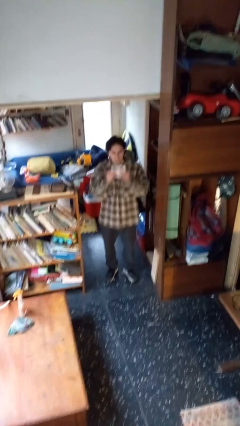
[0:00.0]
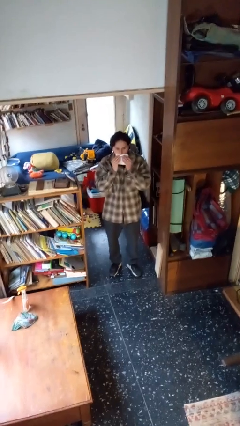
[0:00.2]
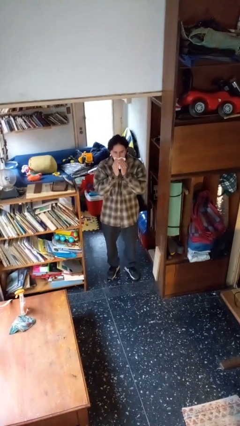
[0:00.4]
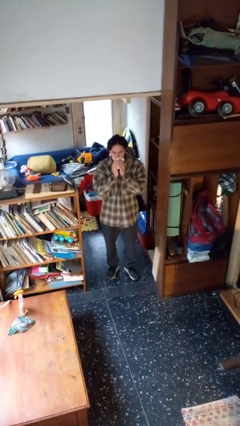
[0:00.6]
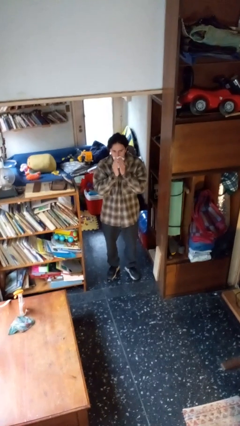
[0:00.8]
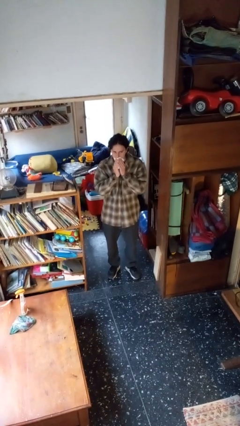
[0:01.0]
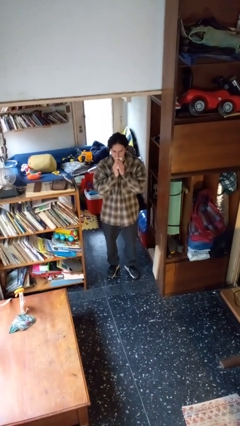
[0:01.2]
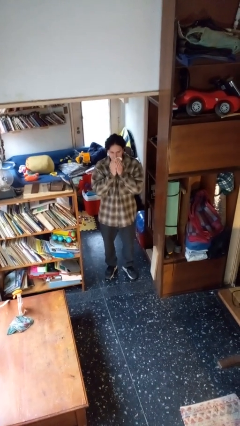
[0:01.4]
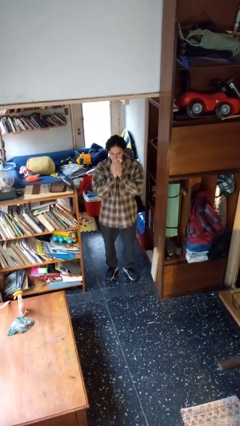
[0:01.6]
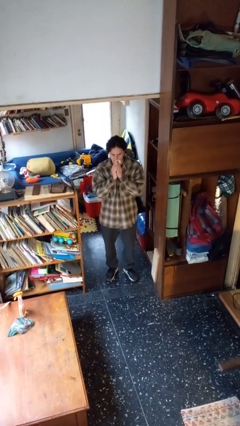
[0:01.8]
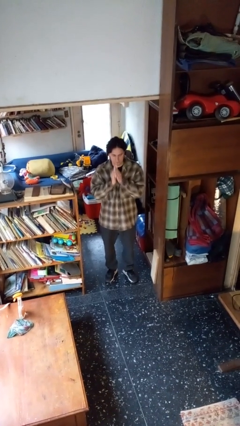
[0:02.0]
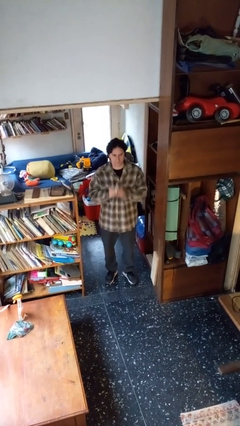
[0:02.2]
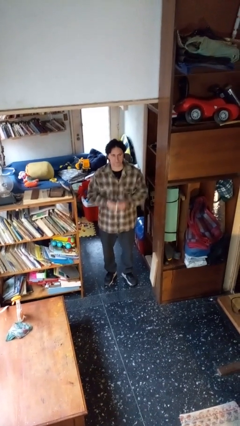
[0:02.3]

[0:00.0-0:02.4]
person wipes mouth with napkin

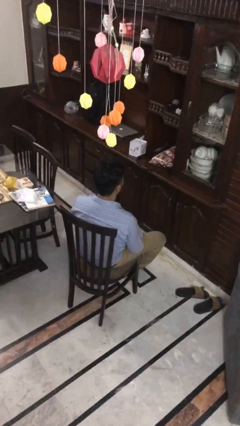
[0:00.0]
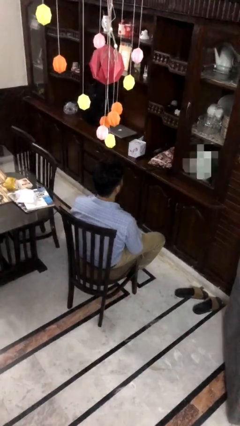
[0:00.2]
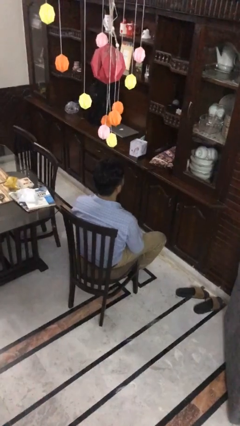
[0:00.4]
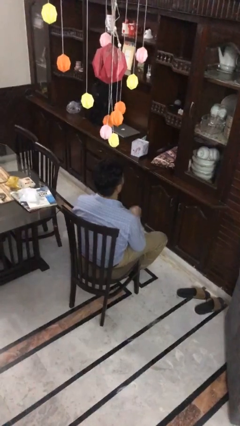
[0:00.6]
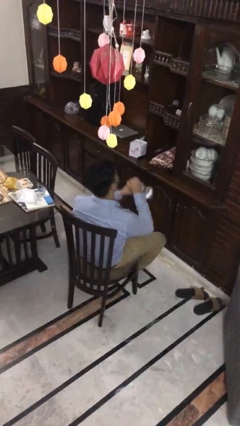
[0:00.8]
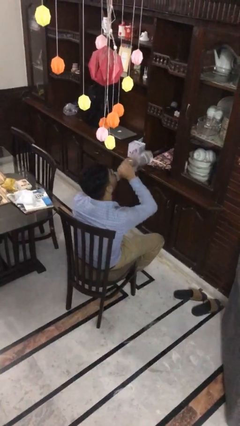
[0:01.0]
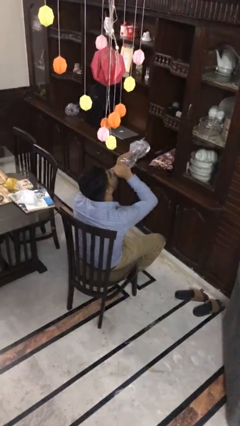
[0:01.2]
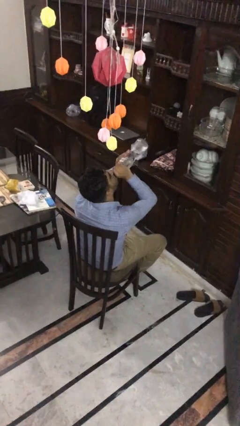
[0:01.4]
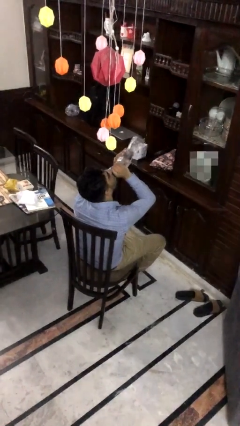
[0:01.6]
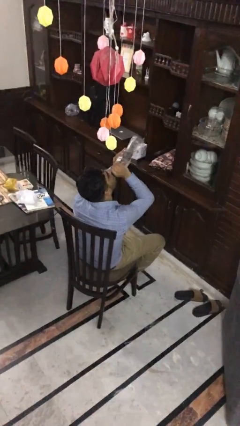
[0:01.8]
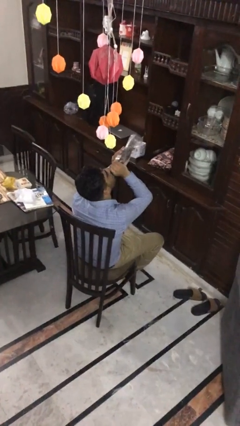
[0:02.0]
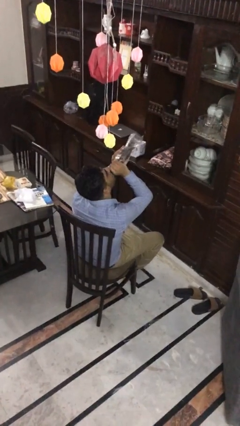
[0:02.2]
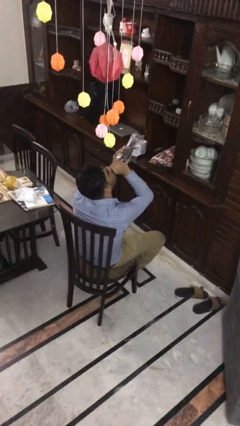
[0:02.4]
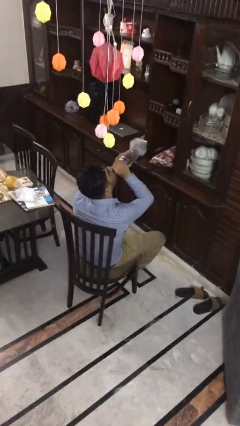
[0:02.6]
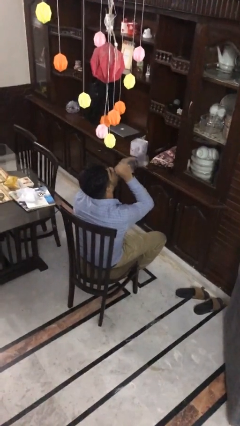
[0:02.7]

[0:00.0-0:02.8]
person drinks from bottle

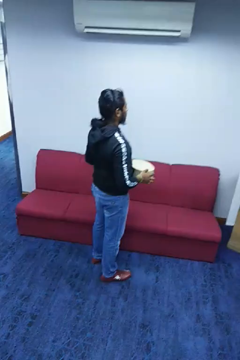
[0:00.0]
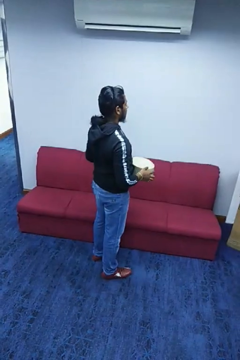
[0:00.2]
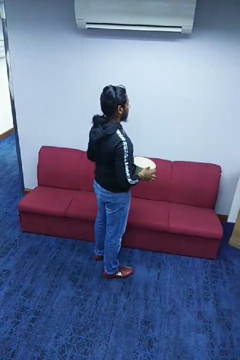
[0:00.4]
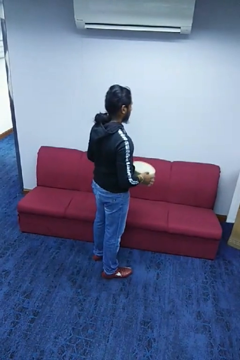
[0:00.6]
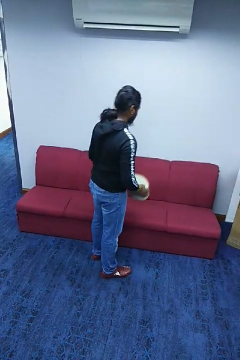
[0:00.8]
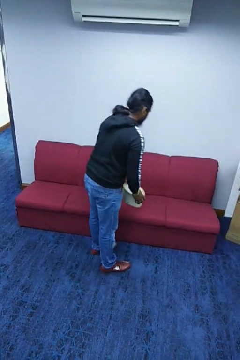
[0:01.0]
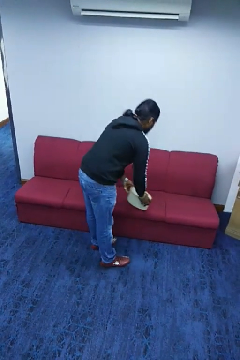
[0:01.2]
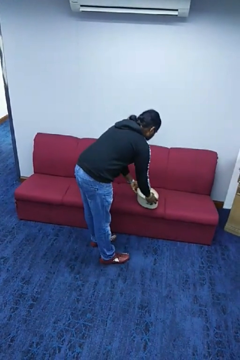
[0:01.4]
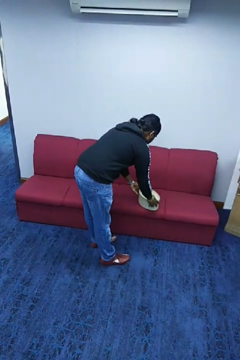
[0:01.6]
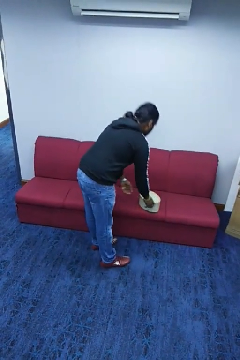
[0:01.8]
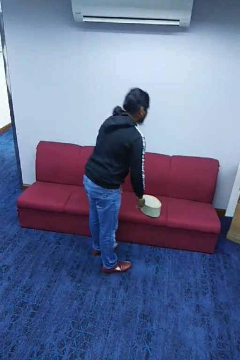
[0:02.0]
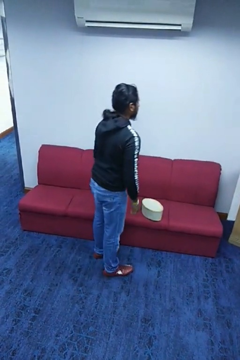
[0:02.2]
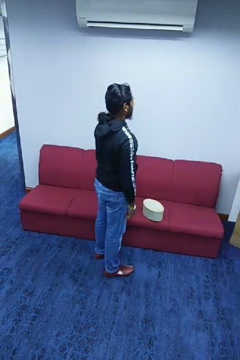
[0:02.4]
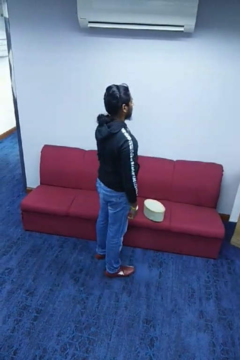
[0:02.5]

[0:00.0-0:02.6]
person puts down object on couch

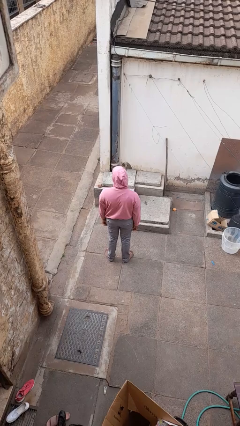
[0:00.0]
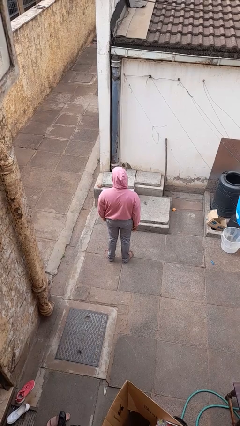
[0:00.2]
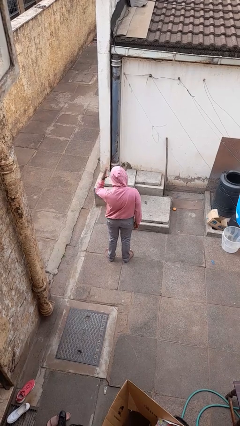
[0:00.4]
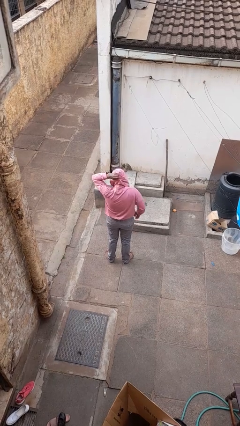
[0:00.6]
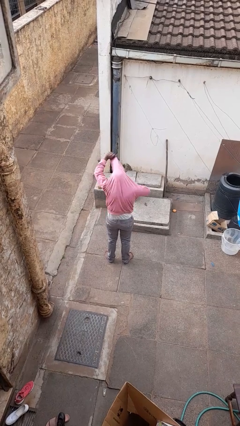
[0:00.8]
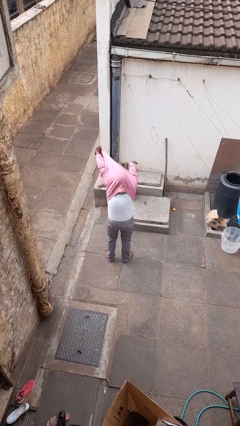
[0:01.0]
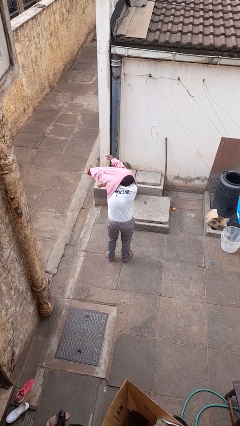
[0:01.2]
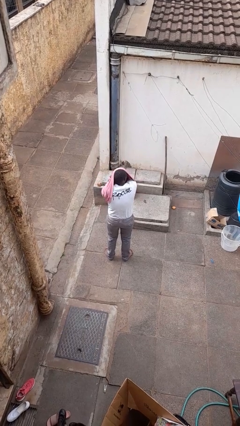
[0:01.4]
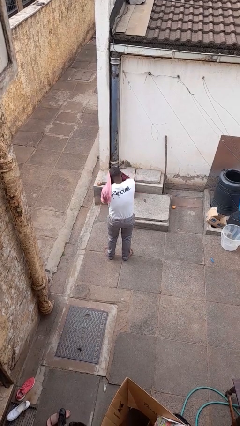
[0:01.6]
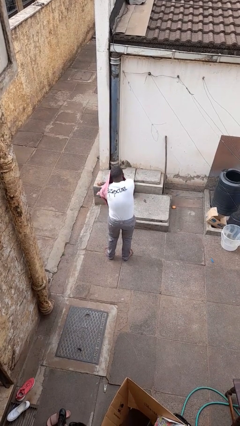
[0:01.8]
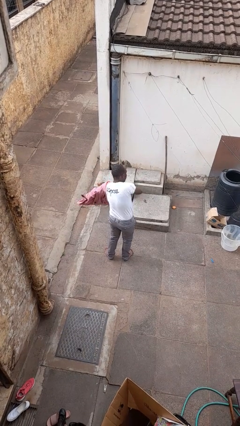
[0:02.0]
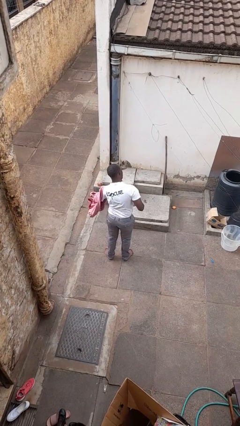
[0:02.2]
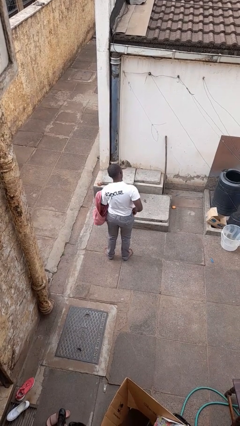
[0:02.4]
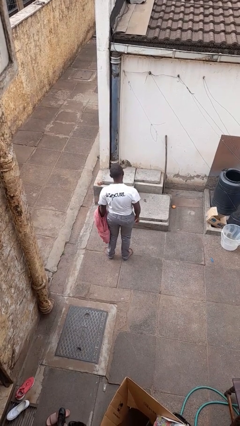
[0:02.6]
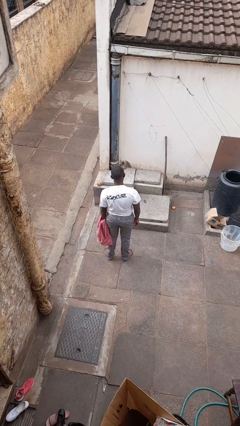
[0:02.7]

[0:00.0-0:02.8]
person takes off hoodie

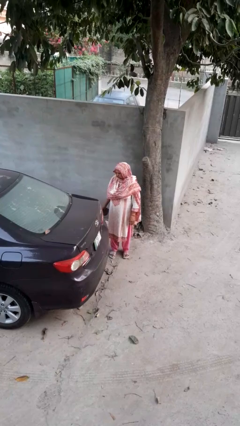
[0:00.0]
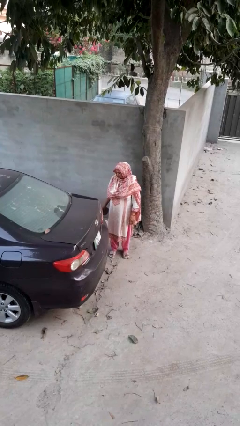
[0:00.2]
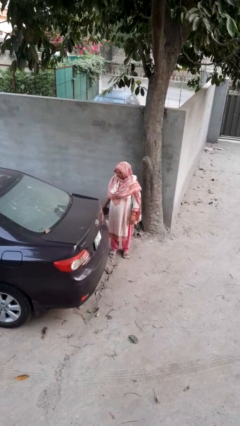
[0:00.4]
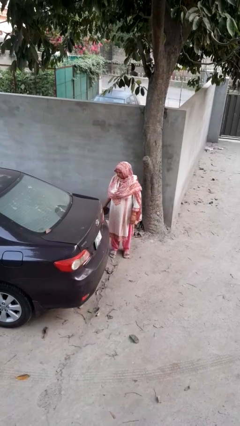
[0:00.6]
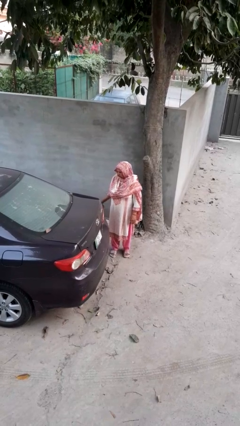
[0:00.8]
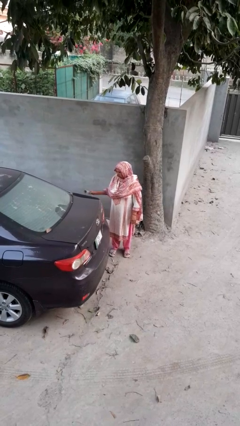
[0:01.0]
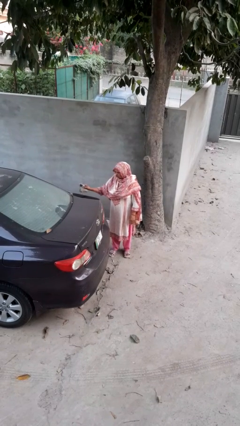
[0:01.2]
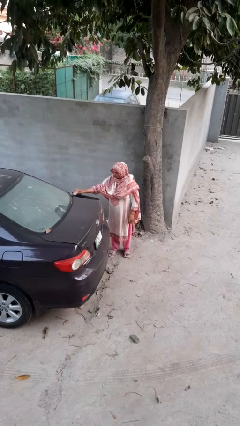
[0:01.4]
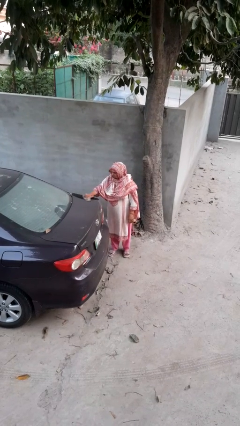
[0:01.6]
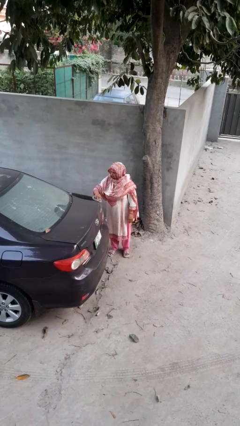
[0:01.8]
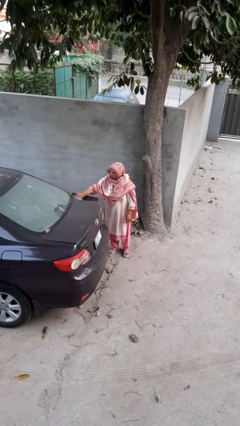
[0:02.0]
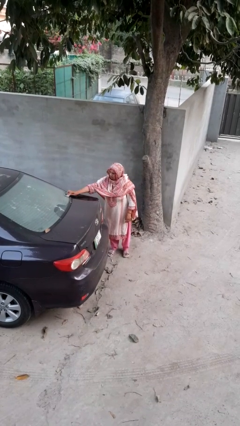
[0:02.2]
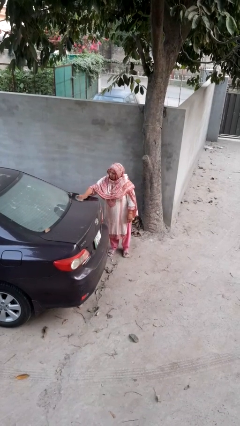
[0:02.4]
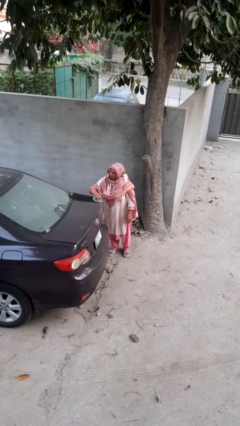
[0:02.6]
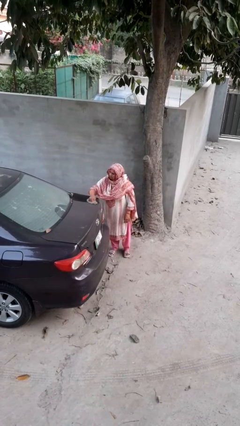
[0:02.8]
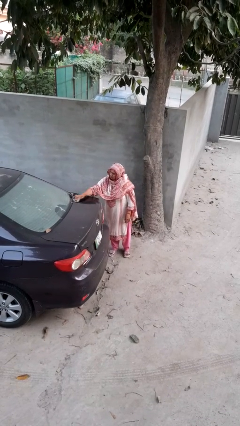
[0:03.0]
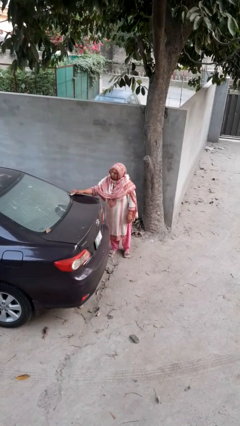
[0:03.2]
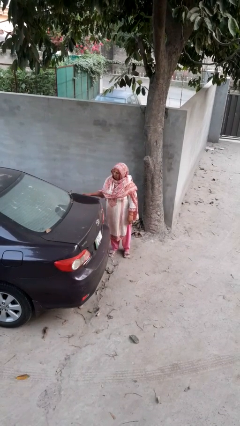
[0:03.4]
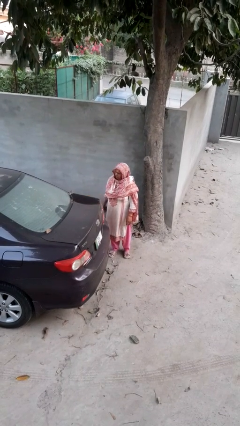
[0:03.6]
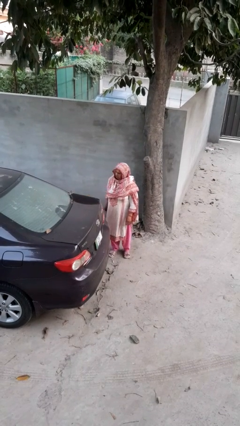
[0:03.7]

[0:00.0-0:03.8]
person polishes car with rag

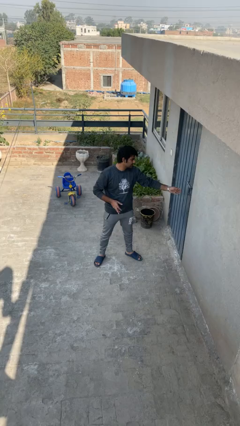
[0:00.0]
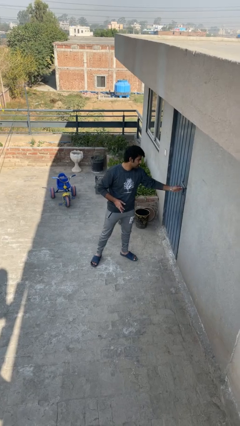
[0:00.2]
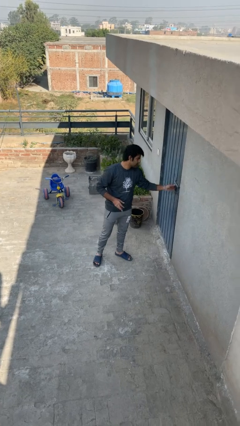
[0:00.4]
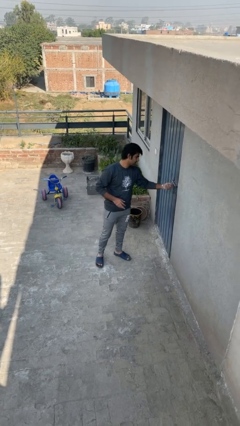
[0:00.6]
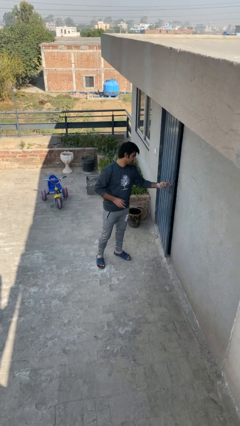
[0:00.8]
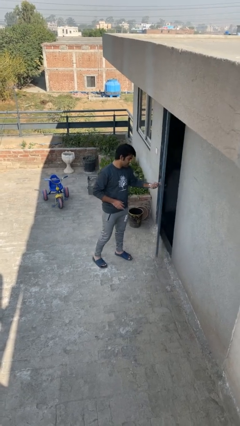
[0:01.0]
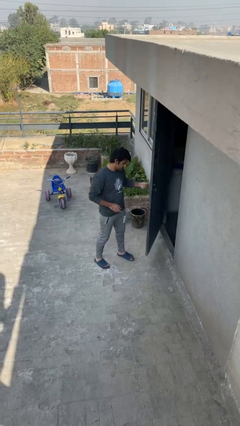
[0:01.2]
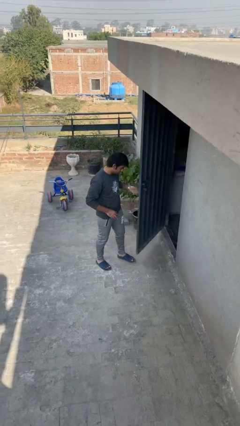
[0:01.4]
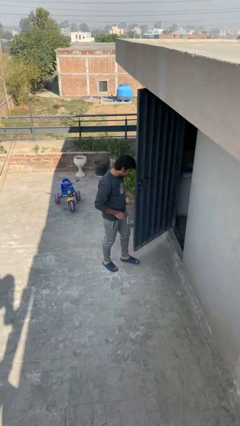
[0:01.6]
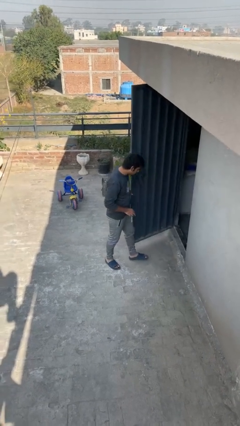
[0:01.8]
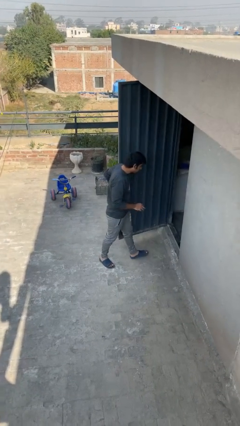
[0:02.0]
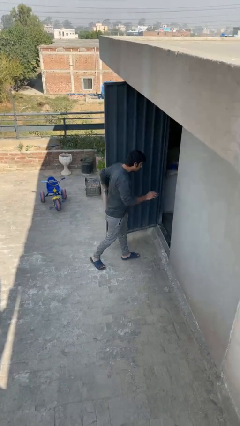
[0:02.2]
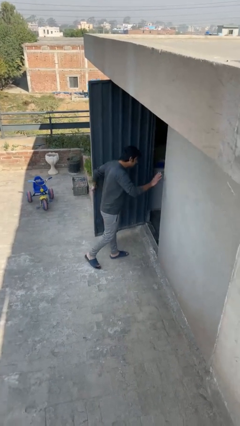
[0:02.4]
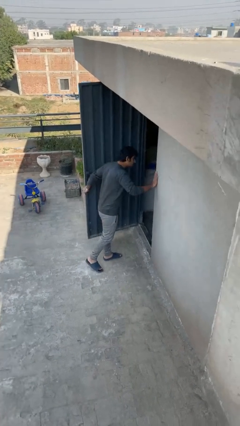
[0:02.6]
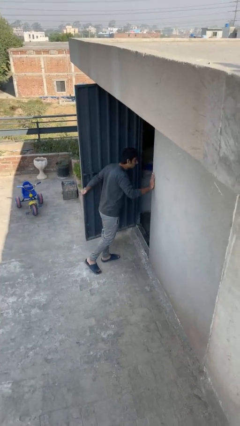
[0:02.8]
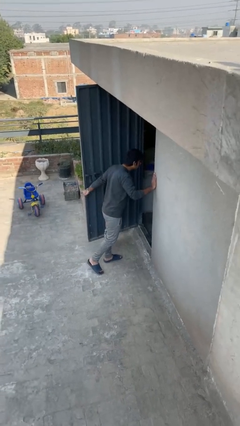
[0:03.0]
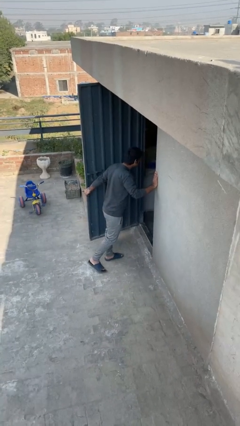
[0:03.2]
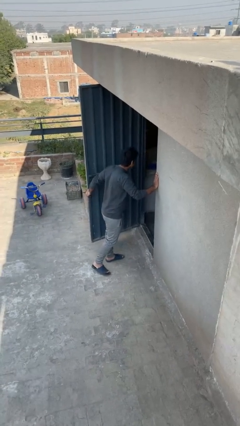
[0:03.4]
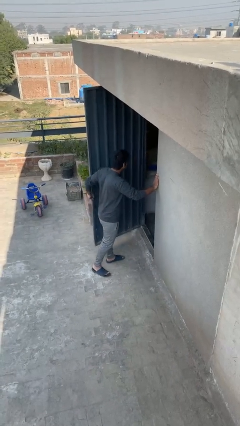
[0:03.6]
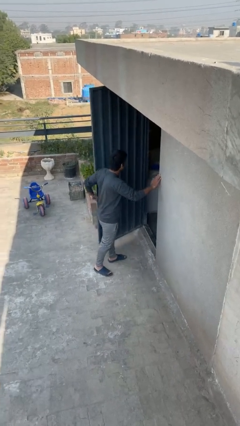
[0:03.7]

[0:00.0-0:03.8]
person opens facility door

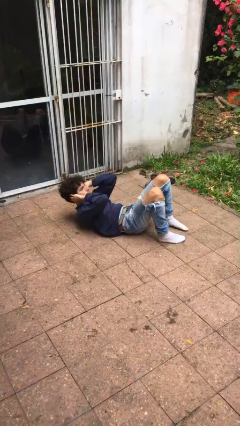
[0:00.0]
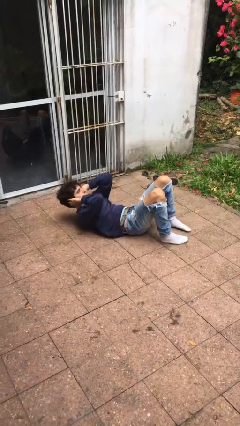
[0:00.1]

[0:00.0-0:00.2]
person exercises with situp
